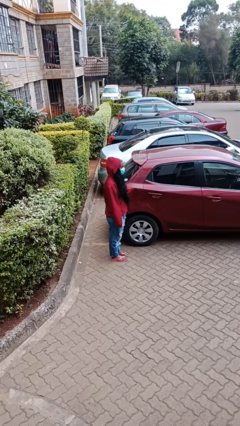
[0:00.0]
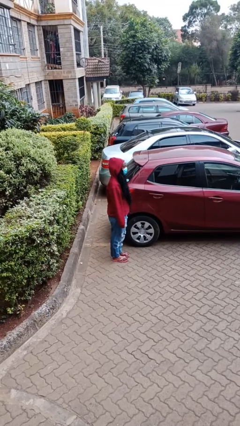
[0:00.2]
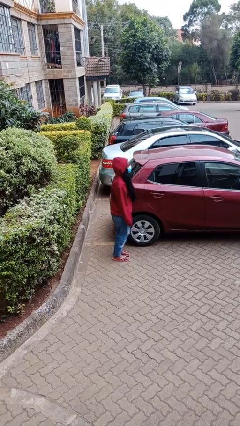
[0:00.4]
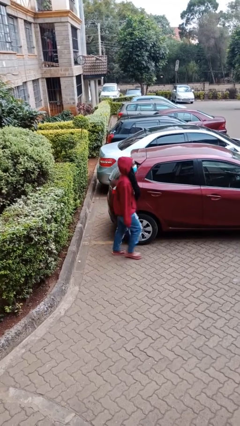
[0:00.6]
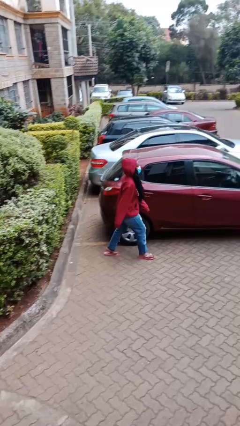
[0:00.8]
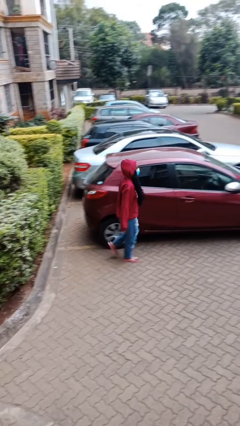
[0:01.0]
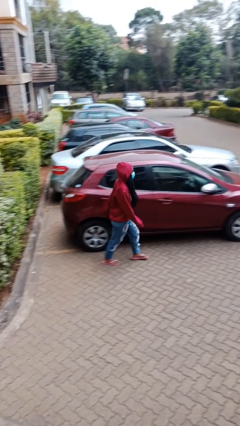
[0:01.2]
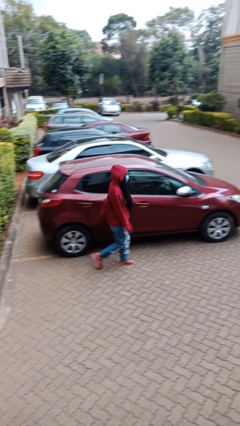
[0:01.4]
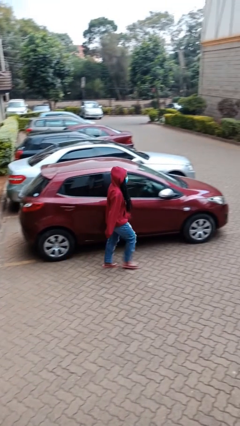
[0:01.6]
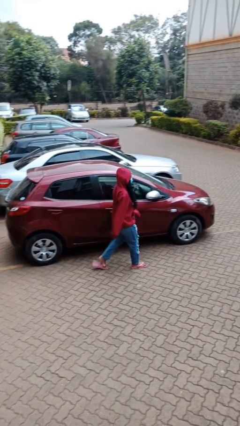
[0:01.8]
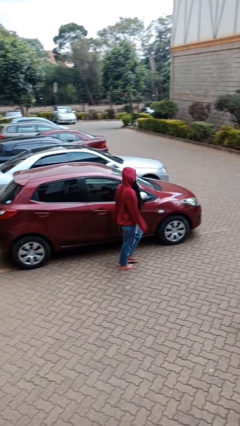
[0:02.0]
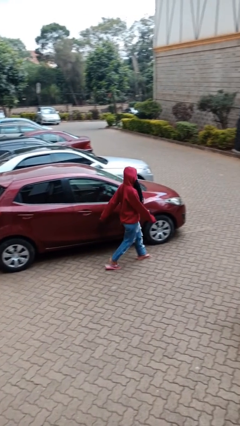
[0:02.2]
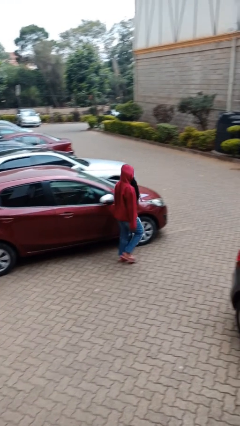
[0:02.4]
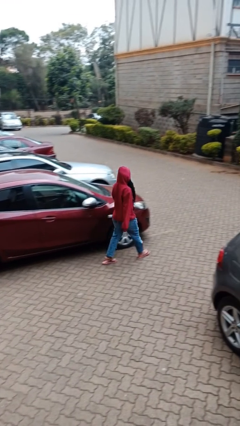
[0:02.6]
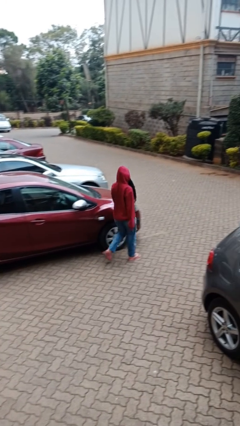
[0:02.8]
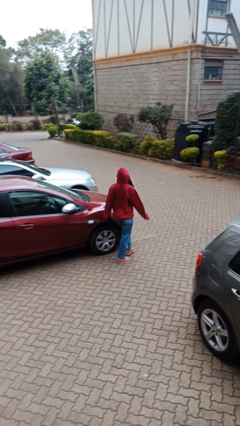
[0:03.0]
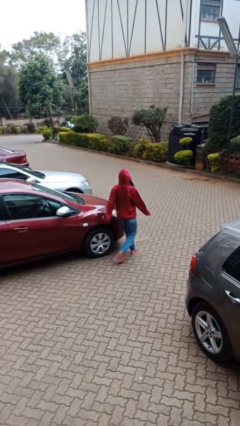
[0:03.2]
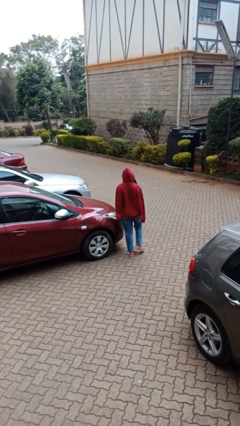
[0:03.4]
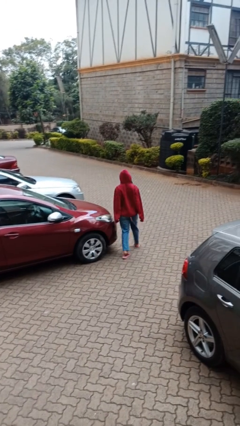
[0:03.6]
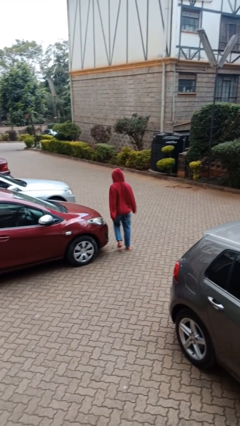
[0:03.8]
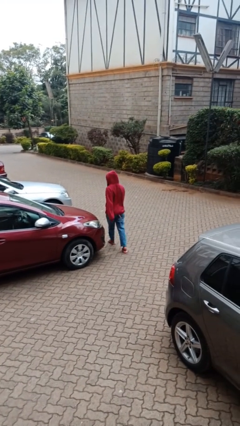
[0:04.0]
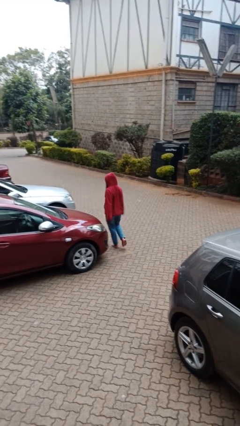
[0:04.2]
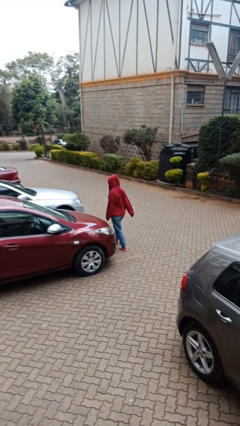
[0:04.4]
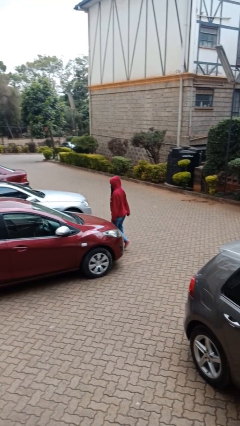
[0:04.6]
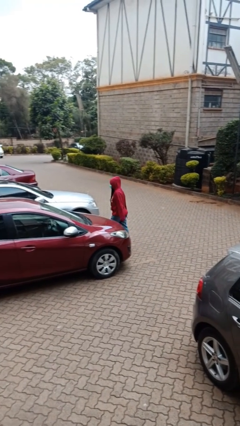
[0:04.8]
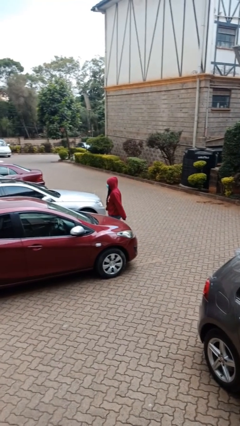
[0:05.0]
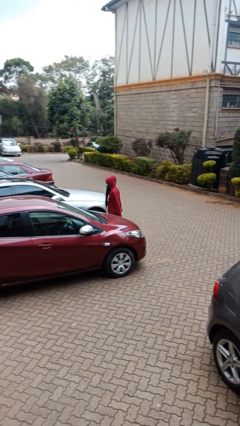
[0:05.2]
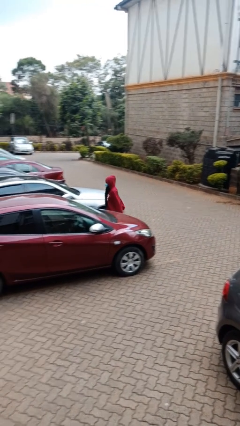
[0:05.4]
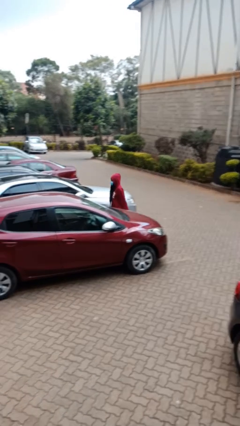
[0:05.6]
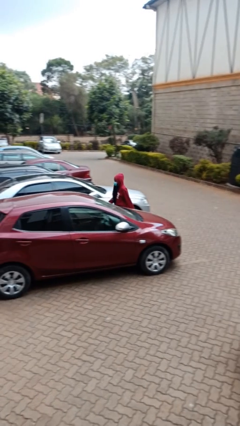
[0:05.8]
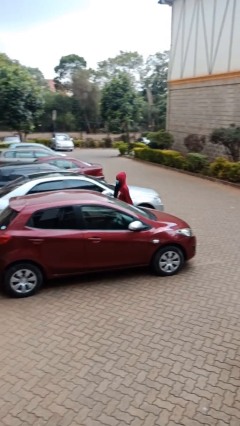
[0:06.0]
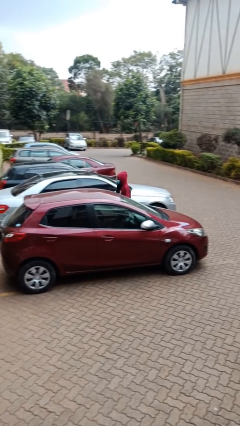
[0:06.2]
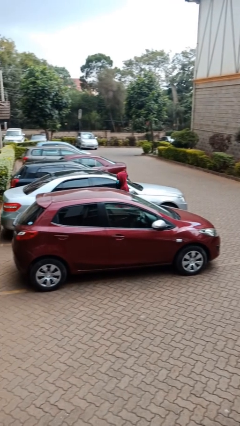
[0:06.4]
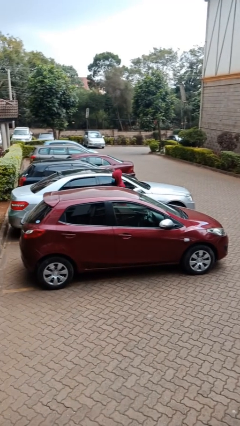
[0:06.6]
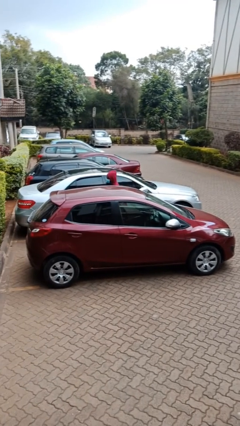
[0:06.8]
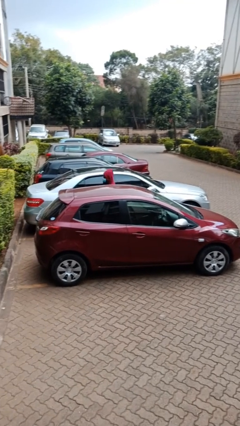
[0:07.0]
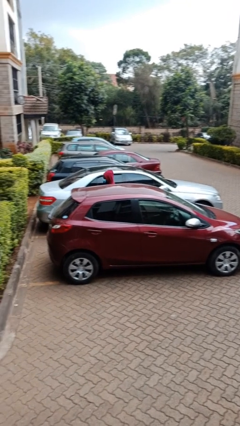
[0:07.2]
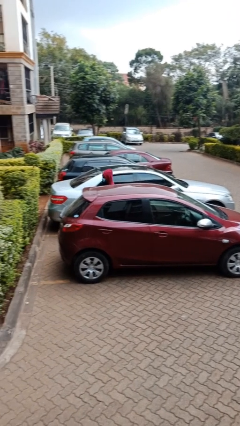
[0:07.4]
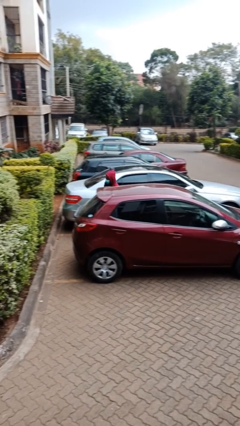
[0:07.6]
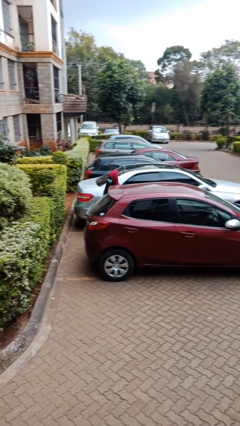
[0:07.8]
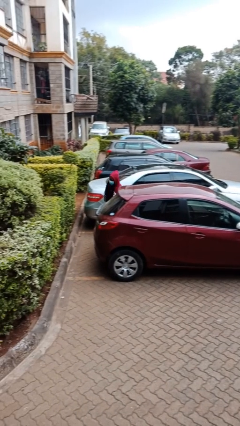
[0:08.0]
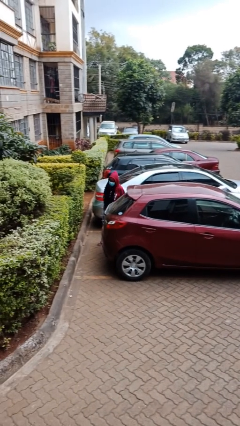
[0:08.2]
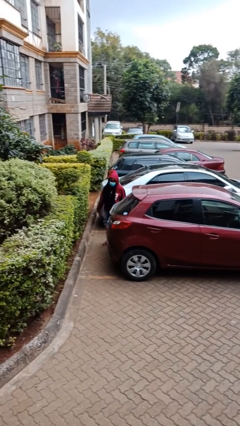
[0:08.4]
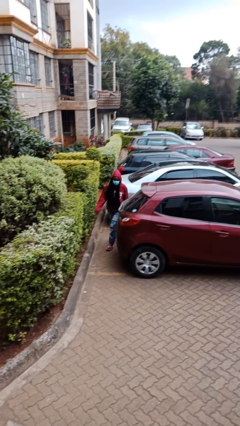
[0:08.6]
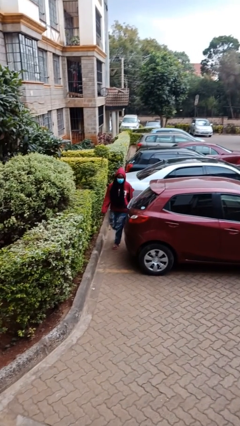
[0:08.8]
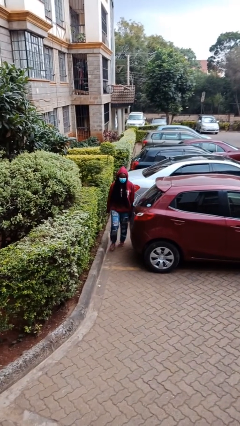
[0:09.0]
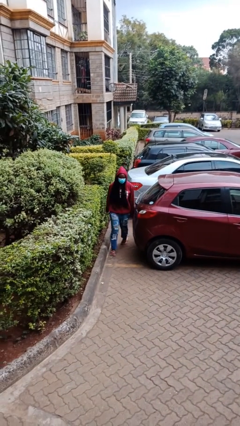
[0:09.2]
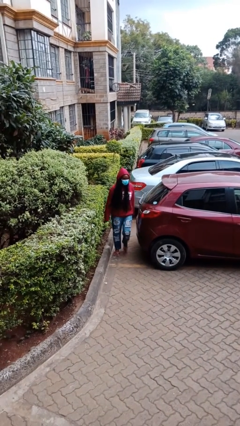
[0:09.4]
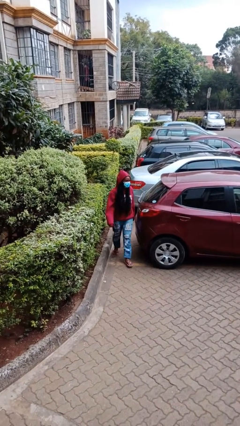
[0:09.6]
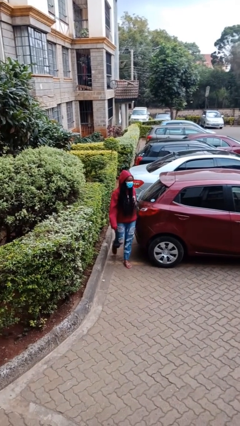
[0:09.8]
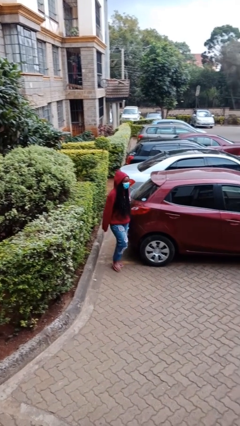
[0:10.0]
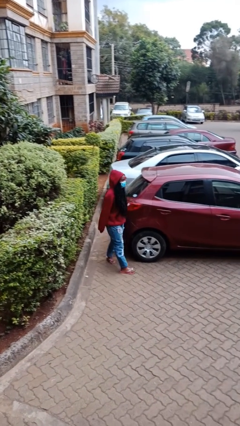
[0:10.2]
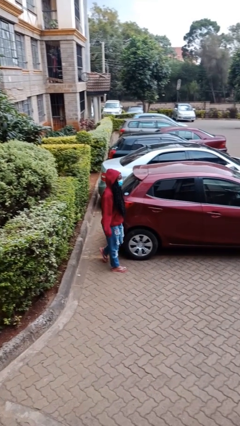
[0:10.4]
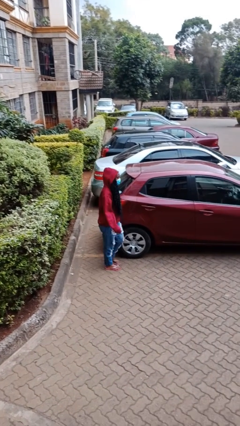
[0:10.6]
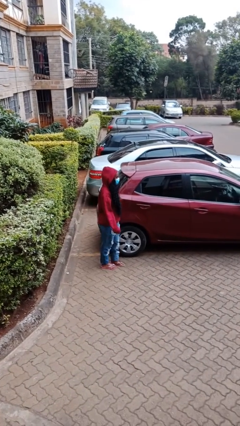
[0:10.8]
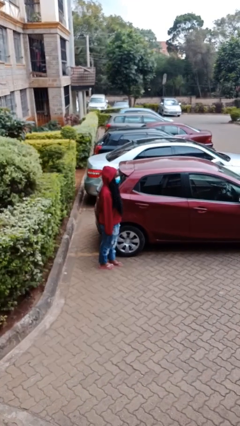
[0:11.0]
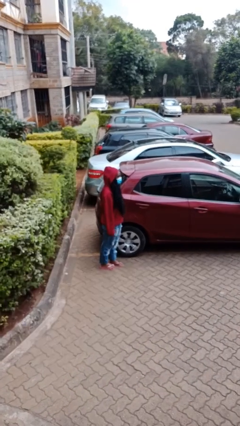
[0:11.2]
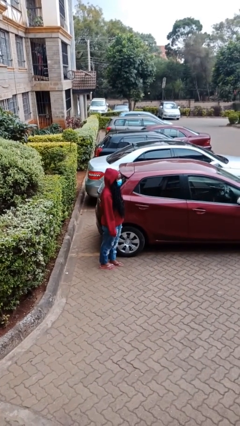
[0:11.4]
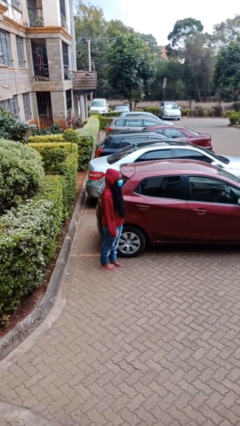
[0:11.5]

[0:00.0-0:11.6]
person walks around car

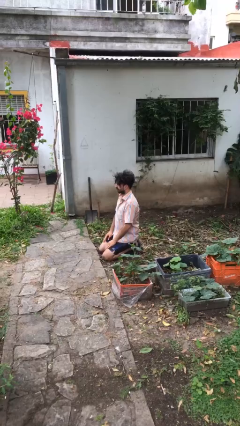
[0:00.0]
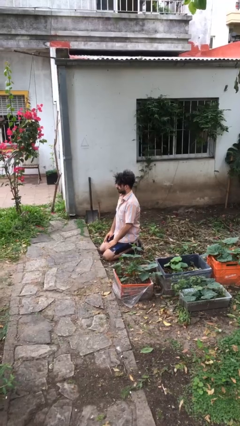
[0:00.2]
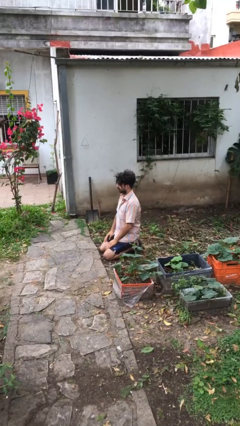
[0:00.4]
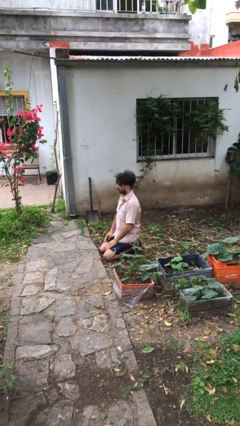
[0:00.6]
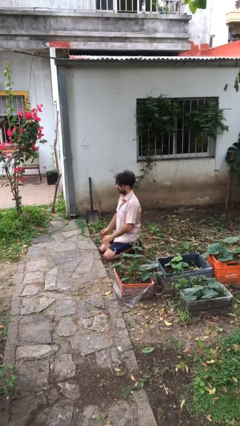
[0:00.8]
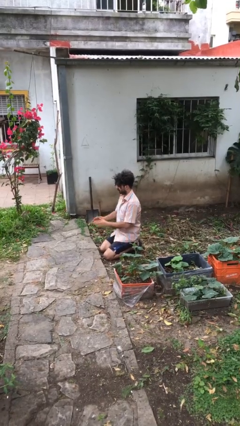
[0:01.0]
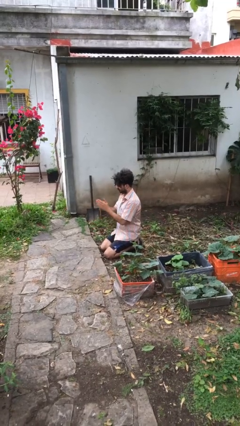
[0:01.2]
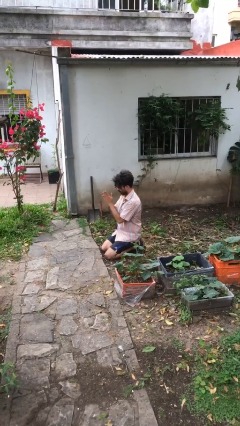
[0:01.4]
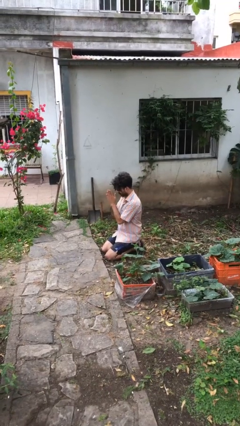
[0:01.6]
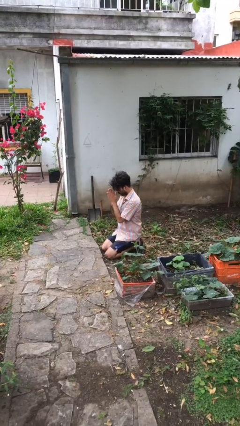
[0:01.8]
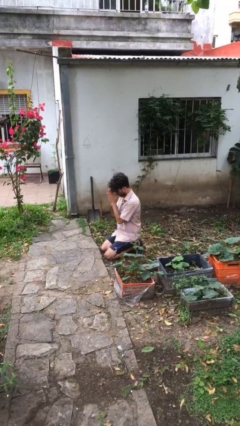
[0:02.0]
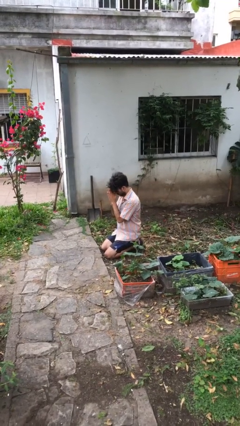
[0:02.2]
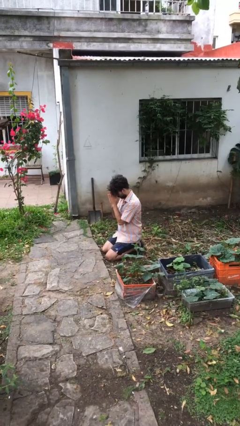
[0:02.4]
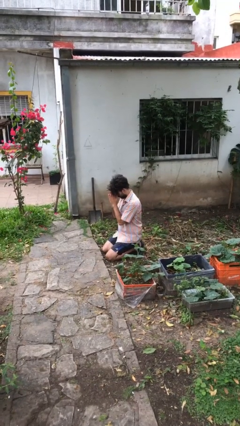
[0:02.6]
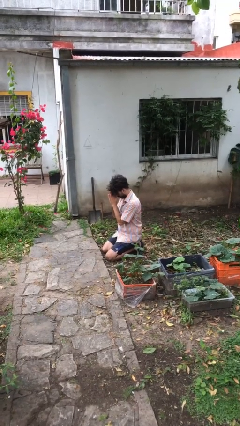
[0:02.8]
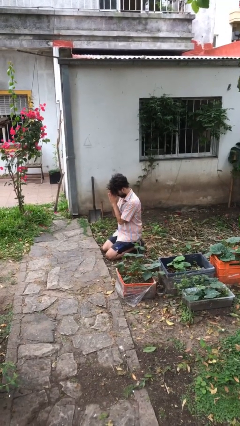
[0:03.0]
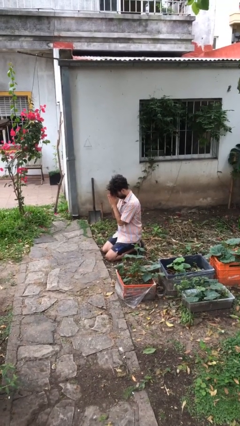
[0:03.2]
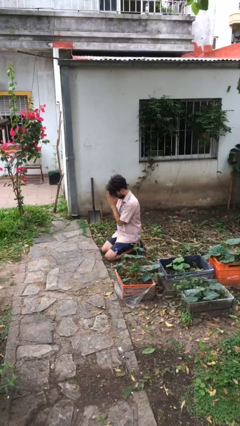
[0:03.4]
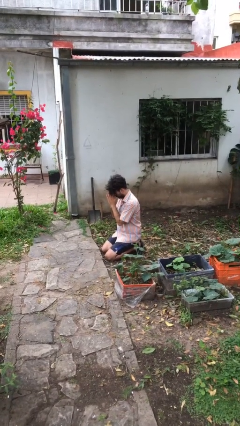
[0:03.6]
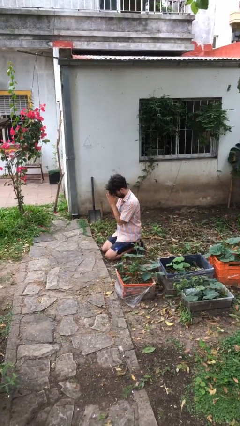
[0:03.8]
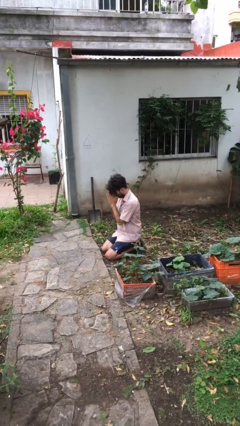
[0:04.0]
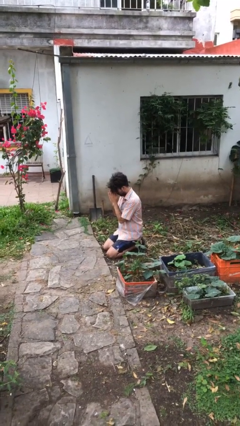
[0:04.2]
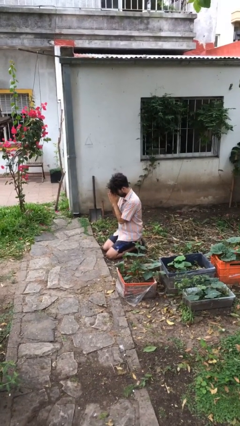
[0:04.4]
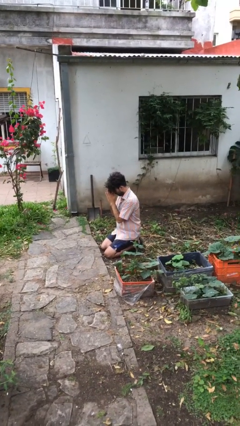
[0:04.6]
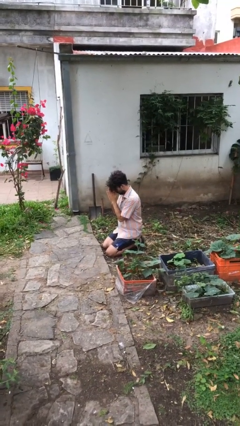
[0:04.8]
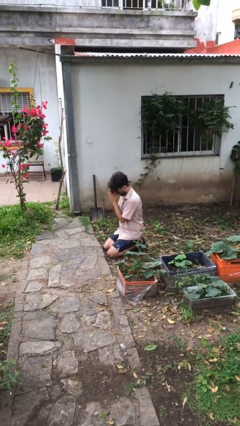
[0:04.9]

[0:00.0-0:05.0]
person prays

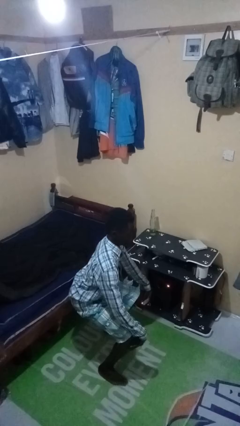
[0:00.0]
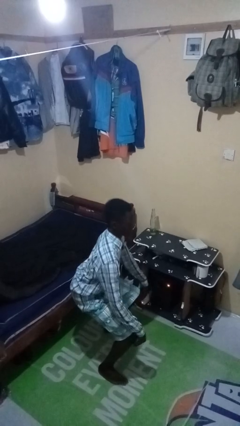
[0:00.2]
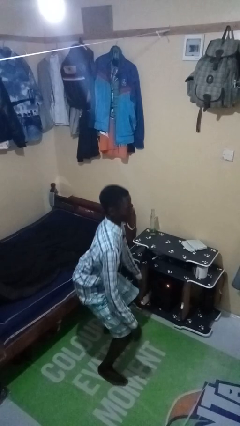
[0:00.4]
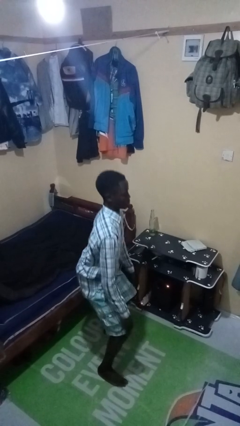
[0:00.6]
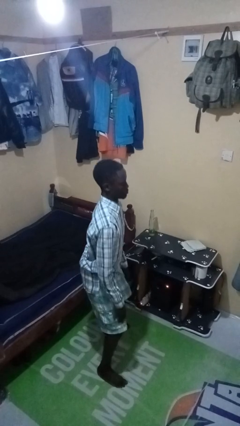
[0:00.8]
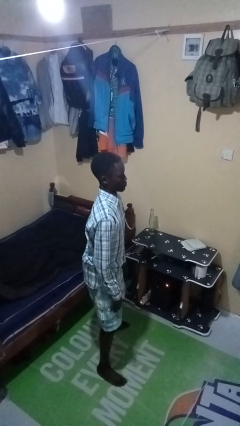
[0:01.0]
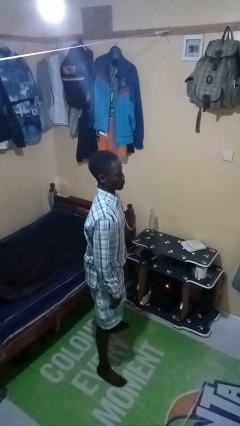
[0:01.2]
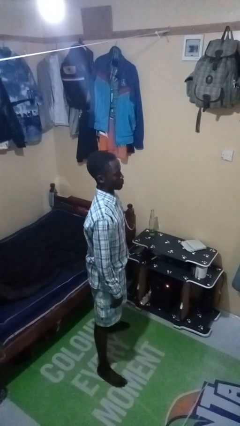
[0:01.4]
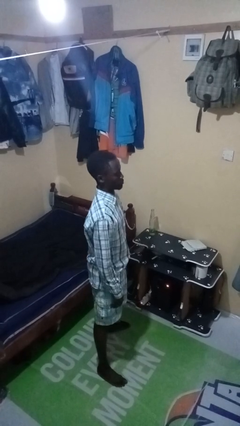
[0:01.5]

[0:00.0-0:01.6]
person stands up
